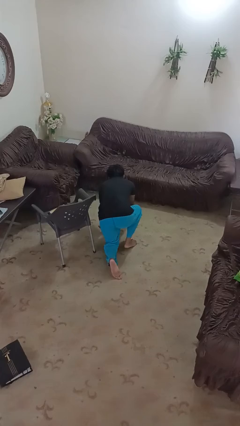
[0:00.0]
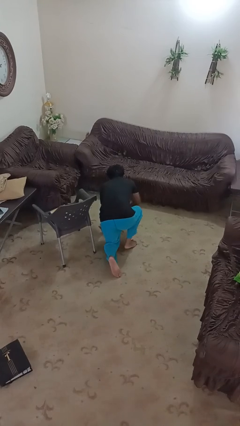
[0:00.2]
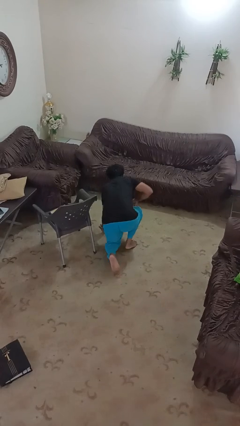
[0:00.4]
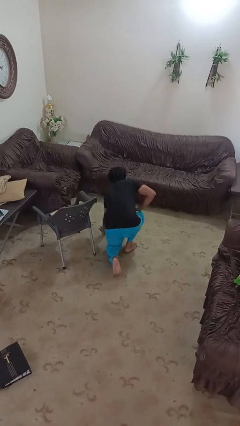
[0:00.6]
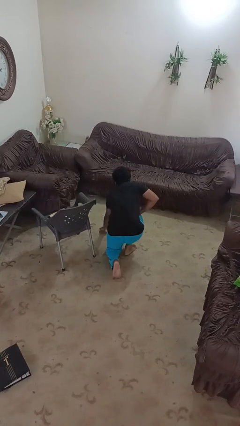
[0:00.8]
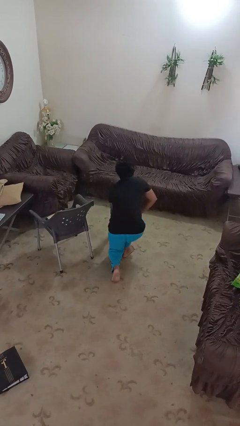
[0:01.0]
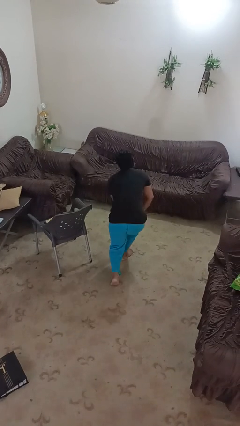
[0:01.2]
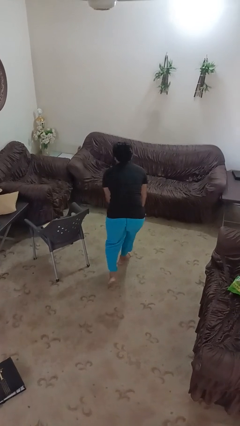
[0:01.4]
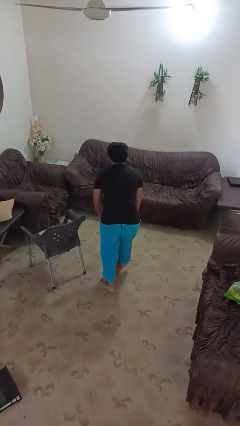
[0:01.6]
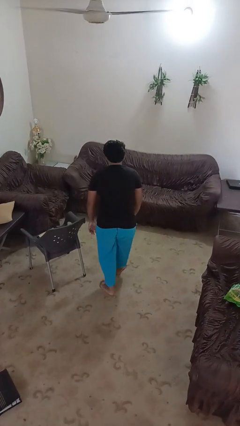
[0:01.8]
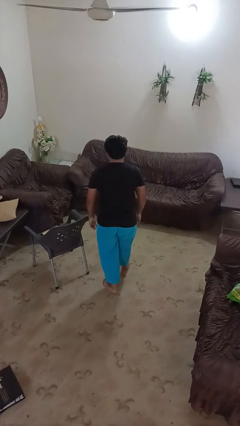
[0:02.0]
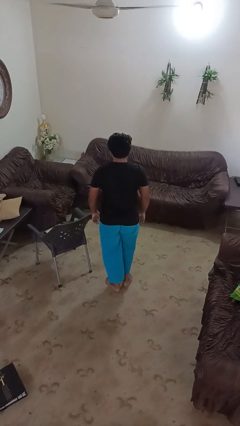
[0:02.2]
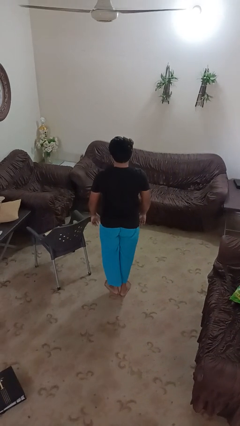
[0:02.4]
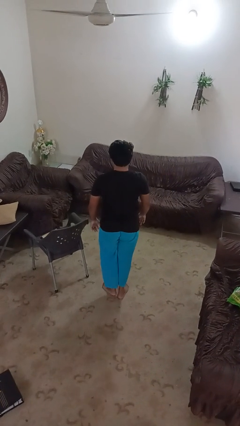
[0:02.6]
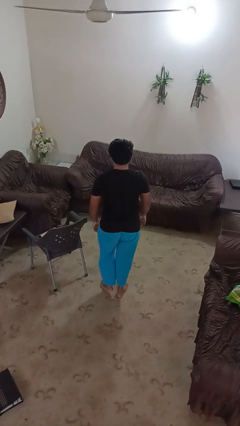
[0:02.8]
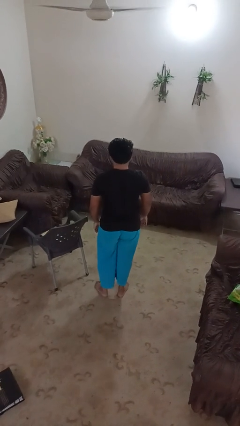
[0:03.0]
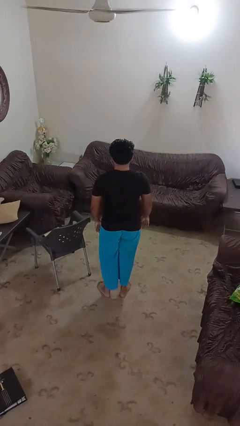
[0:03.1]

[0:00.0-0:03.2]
person stands up from floor

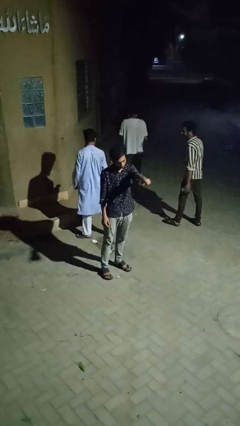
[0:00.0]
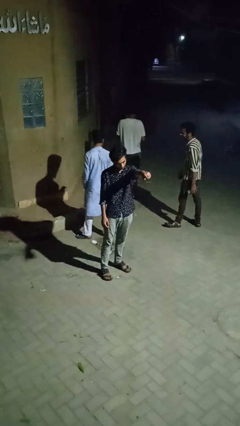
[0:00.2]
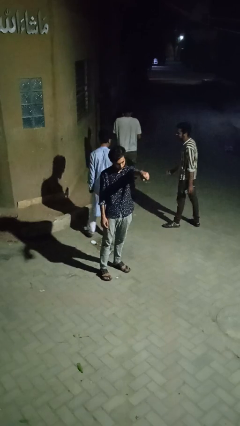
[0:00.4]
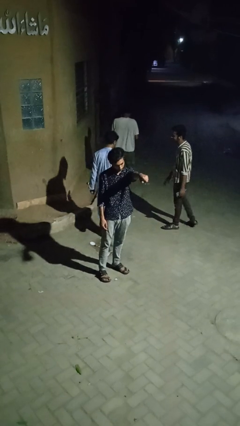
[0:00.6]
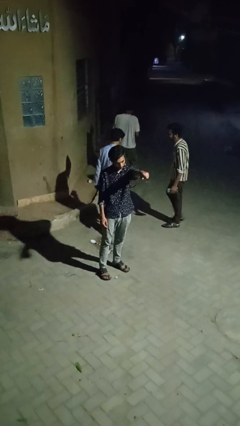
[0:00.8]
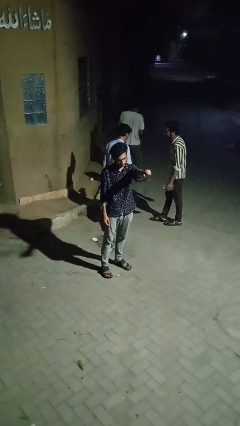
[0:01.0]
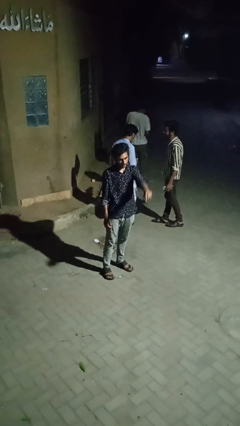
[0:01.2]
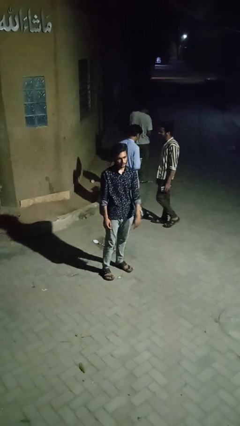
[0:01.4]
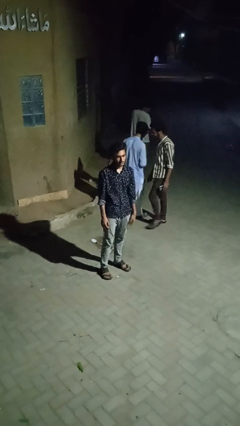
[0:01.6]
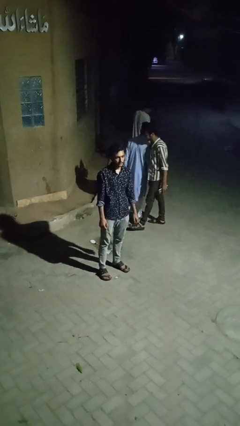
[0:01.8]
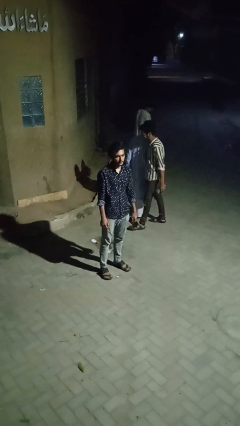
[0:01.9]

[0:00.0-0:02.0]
person points at person

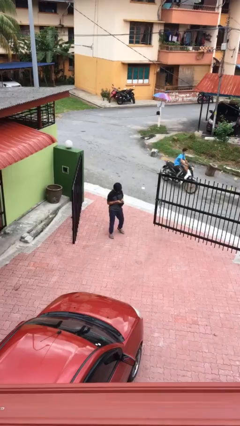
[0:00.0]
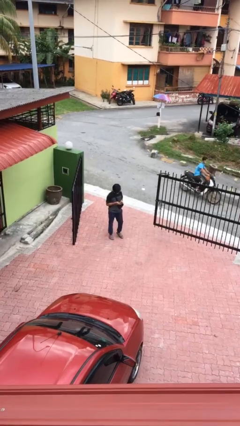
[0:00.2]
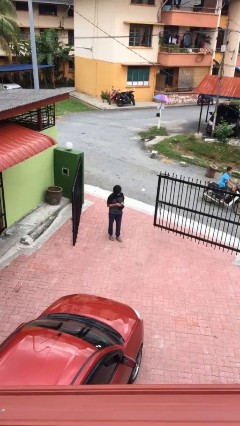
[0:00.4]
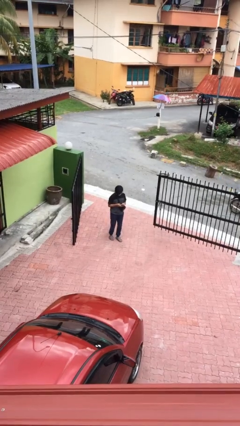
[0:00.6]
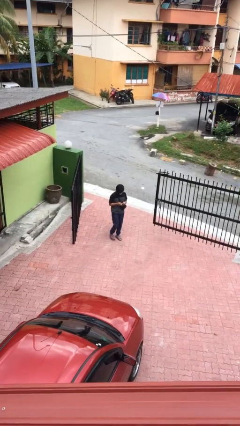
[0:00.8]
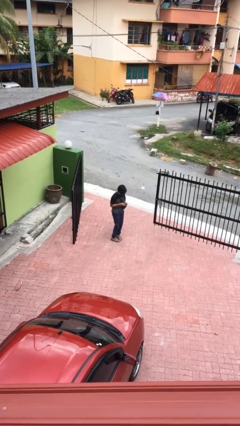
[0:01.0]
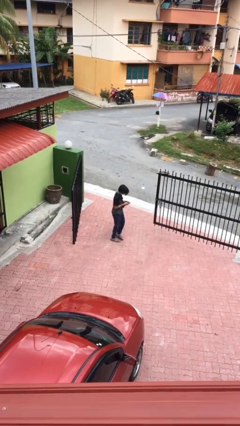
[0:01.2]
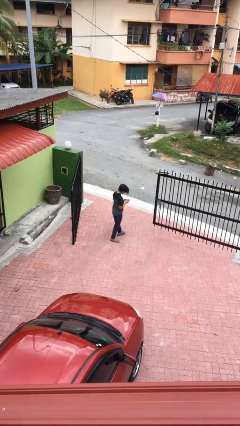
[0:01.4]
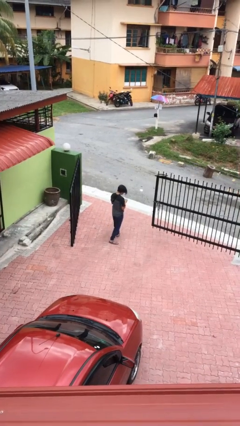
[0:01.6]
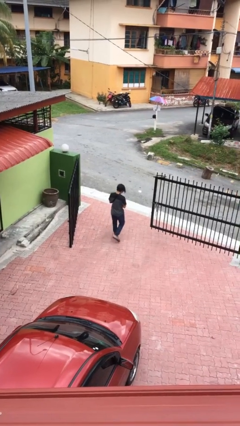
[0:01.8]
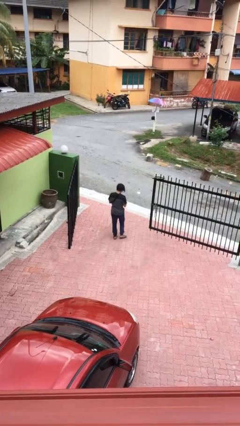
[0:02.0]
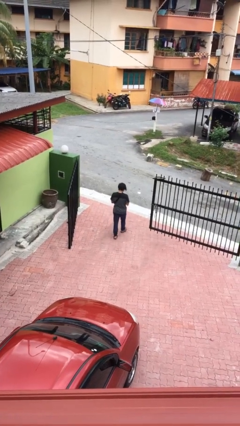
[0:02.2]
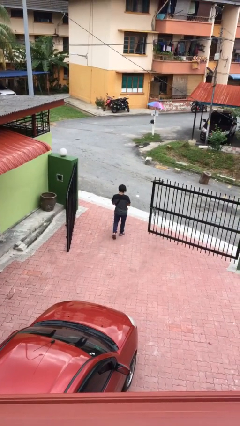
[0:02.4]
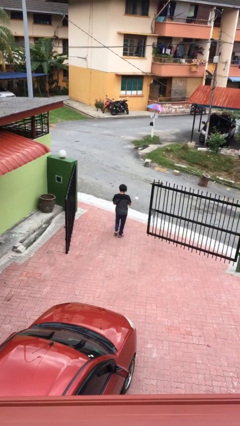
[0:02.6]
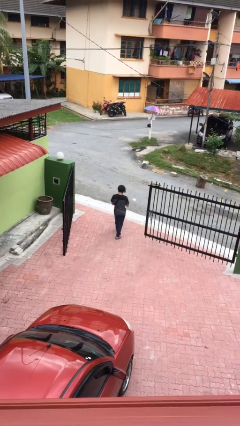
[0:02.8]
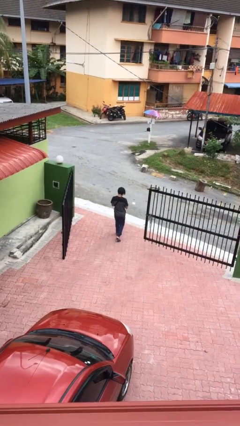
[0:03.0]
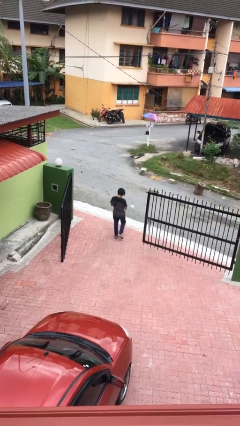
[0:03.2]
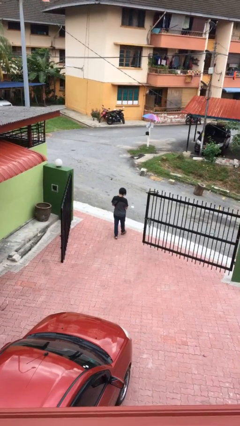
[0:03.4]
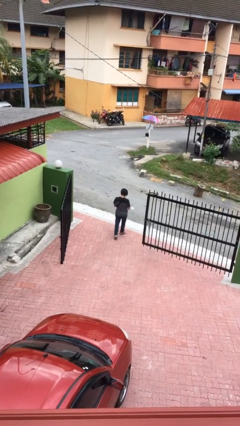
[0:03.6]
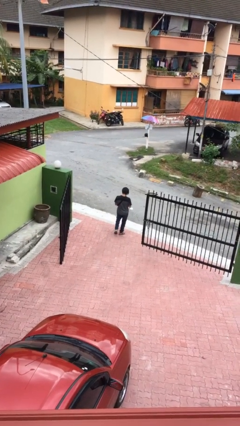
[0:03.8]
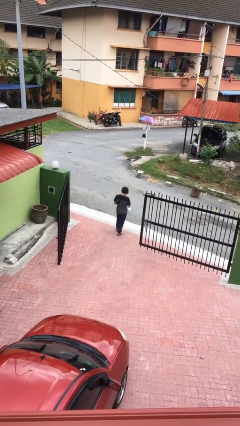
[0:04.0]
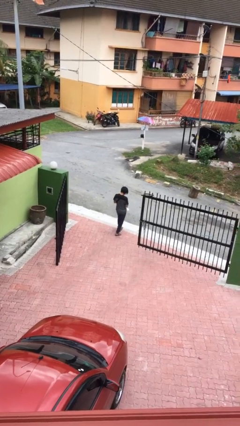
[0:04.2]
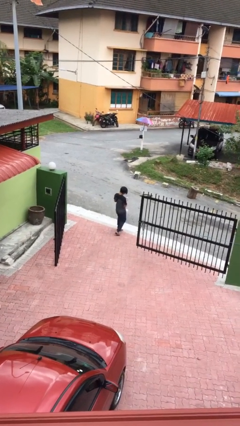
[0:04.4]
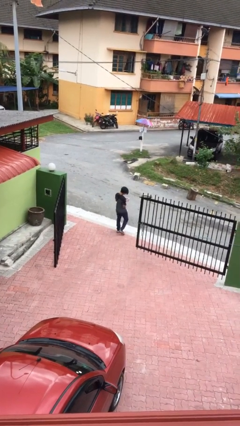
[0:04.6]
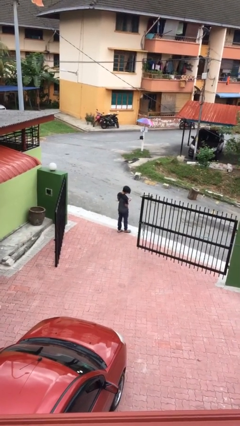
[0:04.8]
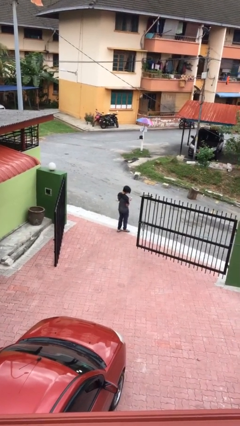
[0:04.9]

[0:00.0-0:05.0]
person exits scene through structure

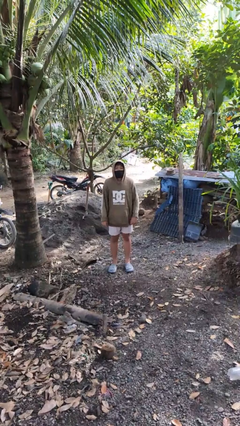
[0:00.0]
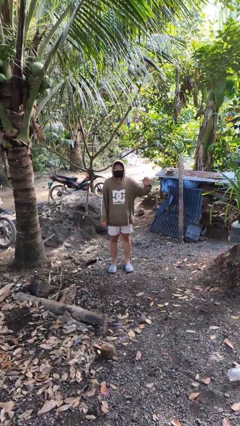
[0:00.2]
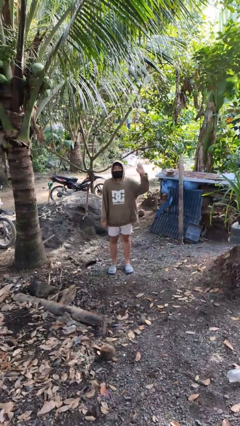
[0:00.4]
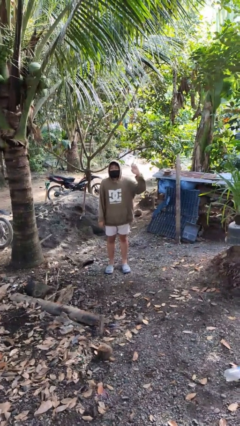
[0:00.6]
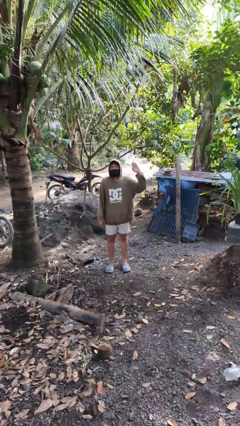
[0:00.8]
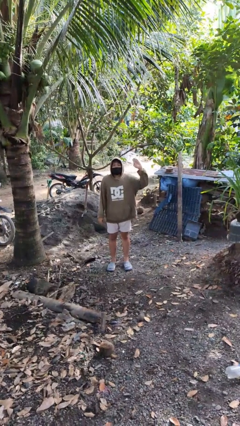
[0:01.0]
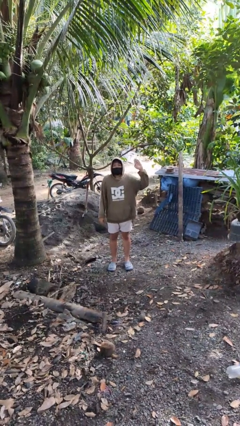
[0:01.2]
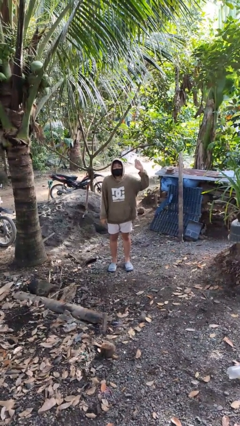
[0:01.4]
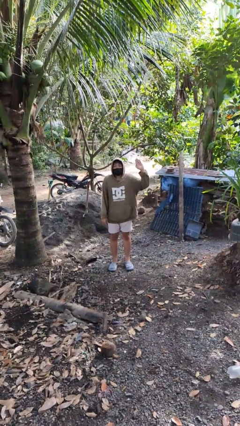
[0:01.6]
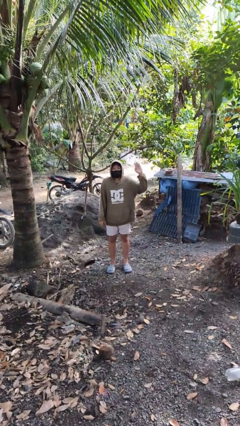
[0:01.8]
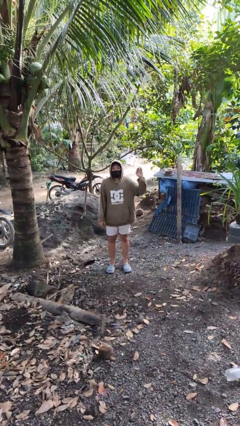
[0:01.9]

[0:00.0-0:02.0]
person gestures number five

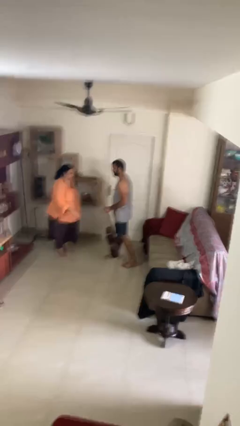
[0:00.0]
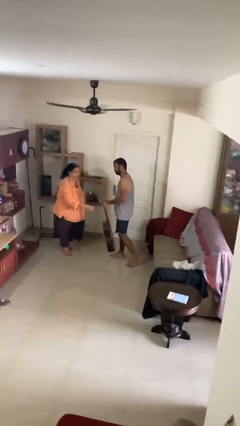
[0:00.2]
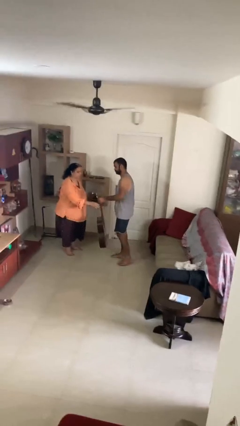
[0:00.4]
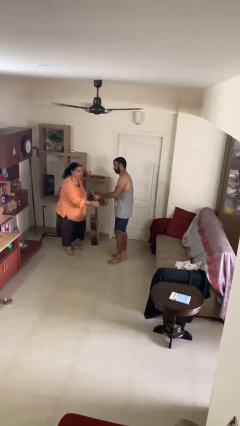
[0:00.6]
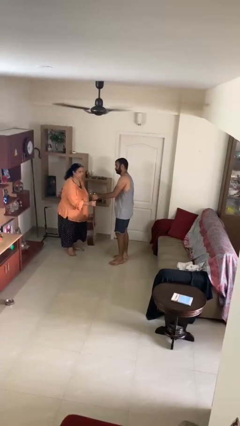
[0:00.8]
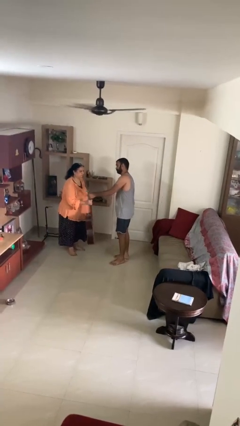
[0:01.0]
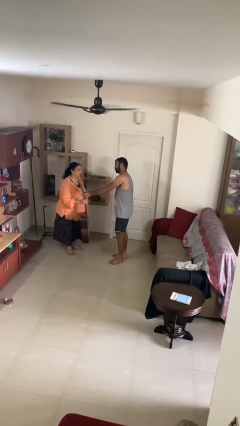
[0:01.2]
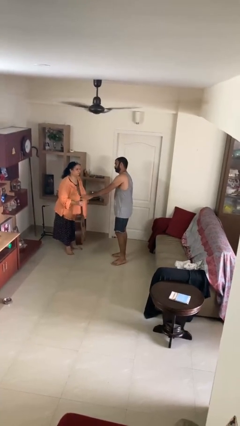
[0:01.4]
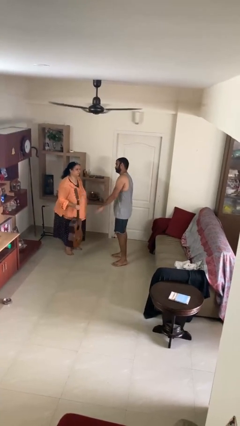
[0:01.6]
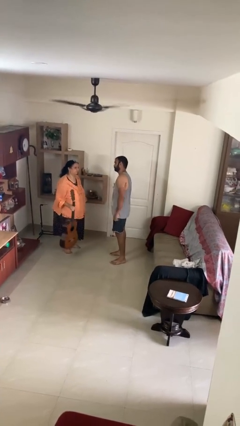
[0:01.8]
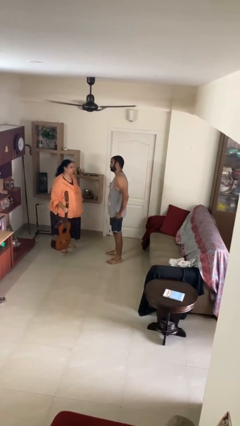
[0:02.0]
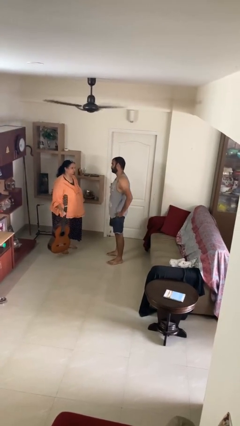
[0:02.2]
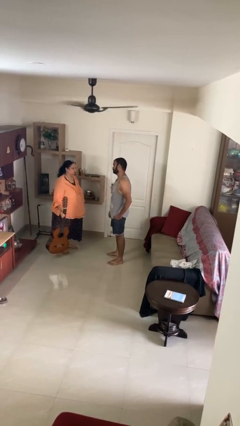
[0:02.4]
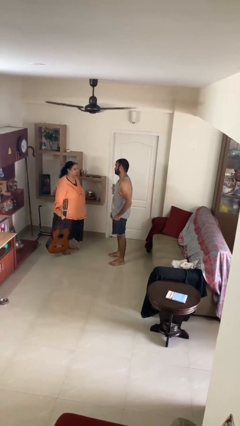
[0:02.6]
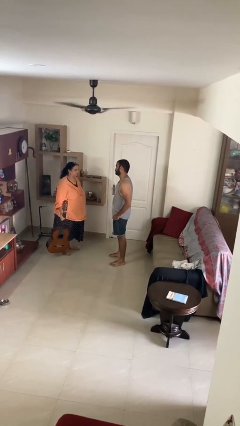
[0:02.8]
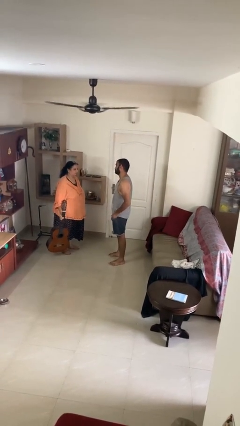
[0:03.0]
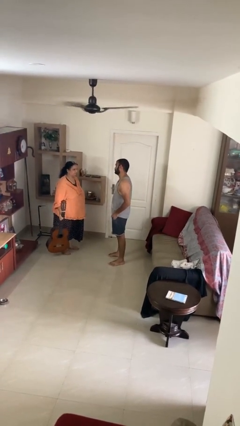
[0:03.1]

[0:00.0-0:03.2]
person transfers object to person

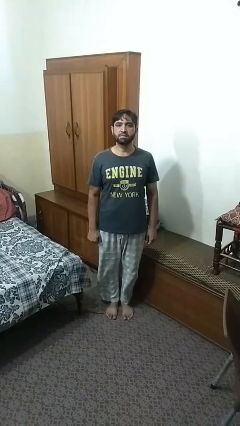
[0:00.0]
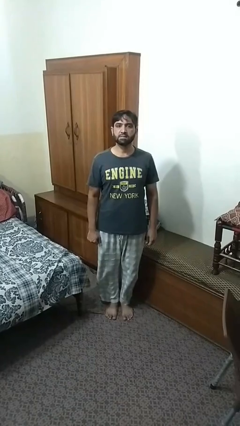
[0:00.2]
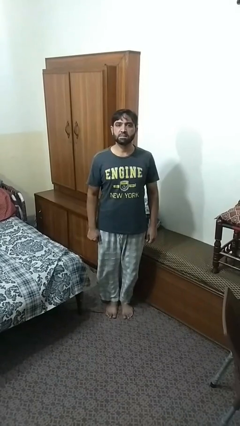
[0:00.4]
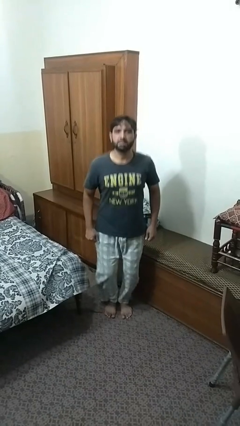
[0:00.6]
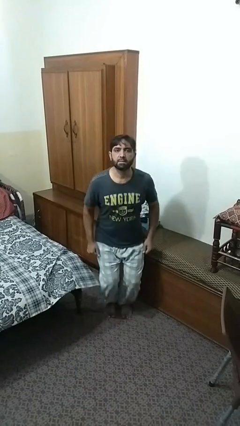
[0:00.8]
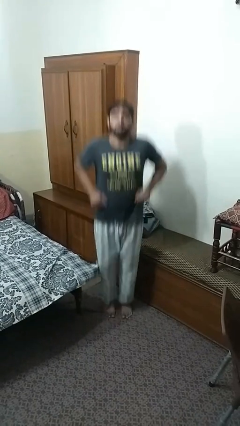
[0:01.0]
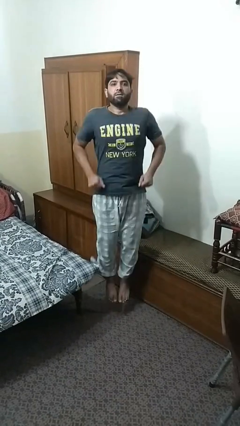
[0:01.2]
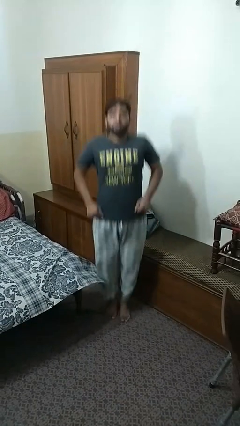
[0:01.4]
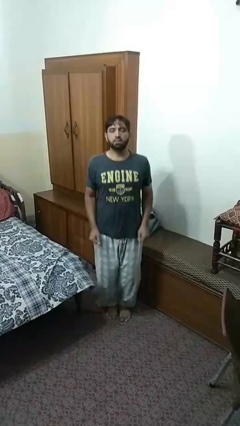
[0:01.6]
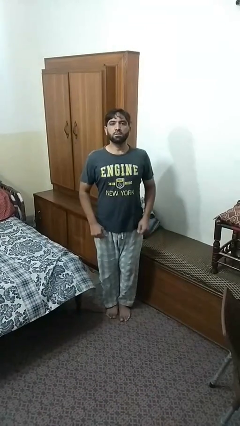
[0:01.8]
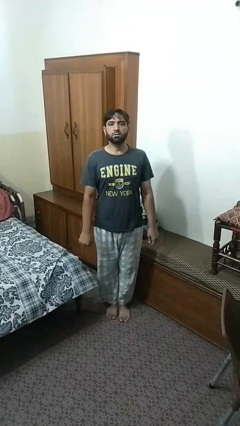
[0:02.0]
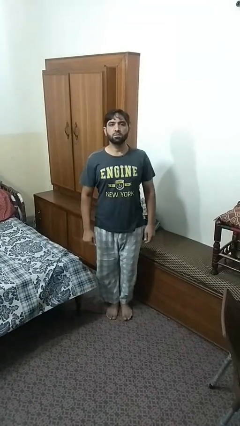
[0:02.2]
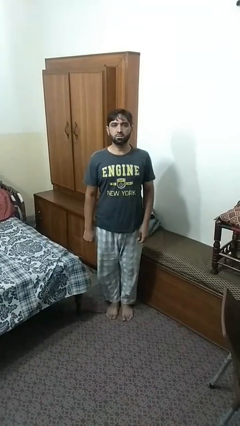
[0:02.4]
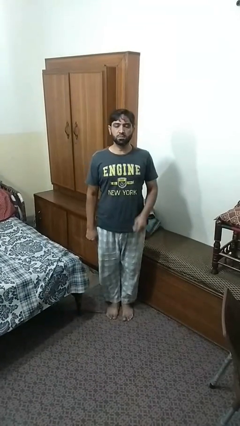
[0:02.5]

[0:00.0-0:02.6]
person jumps
